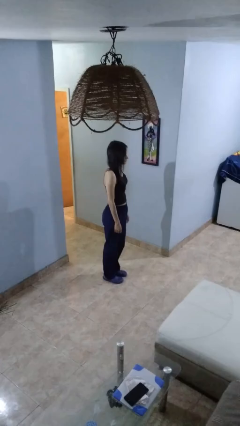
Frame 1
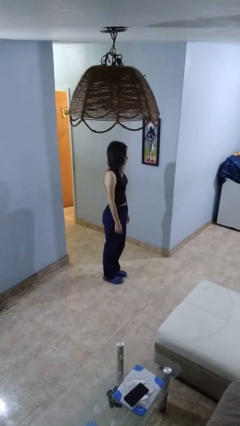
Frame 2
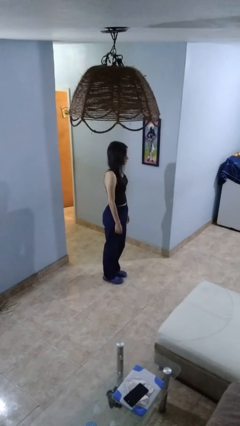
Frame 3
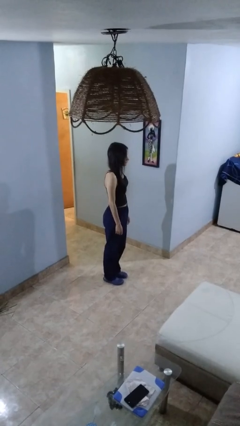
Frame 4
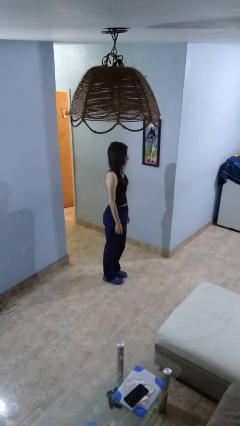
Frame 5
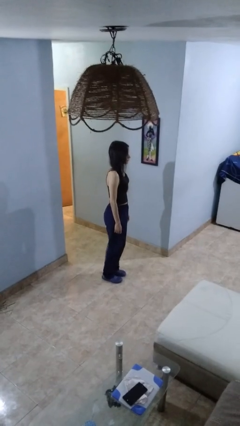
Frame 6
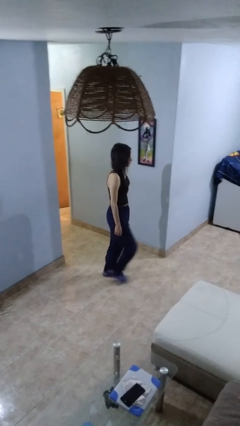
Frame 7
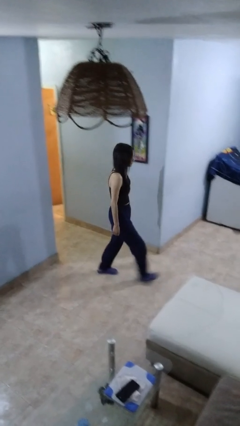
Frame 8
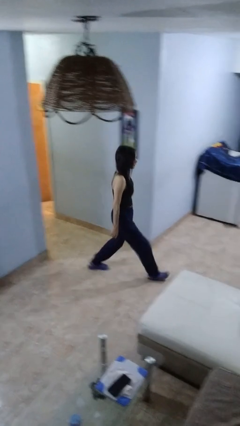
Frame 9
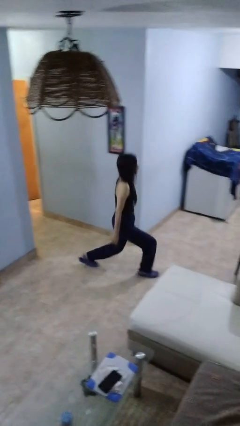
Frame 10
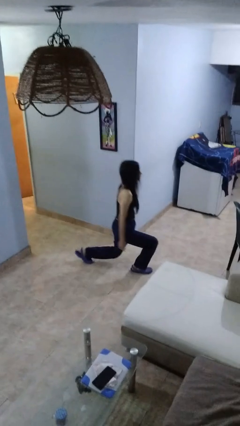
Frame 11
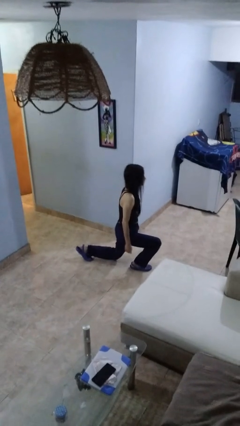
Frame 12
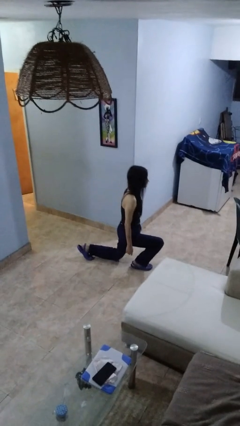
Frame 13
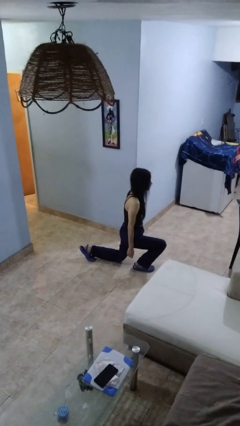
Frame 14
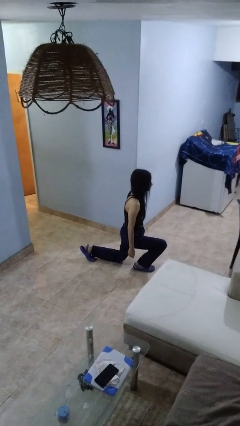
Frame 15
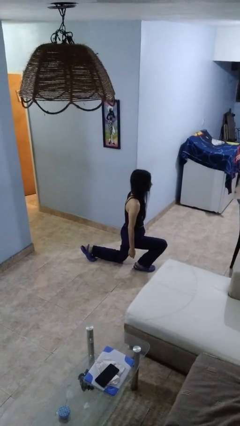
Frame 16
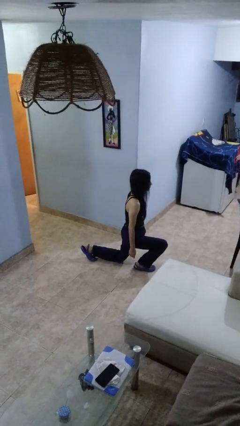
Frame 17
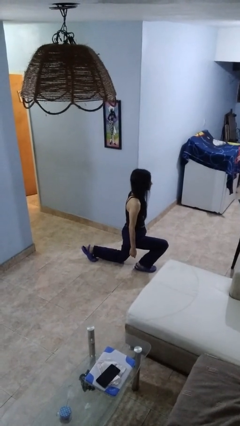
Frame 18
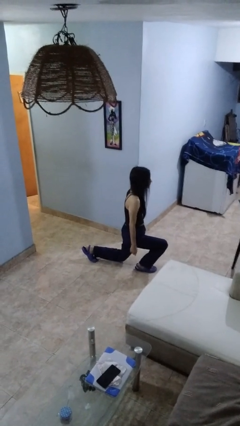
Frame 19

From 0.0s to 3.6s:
person exercises with lunges

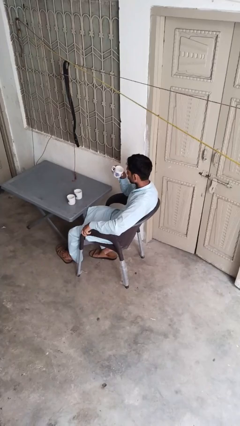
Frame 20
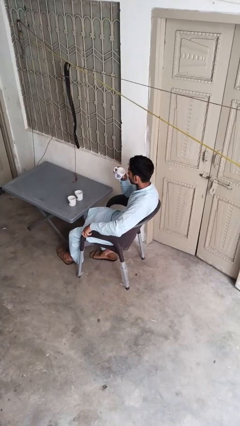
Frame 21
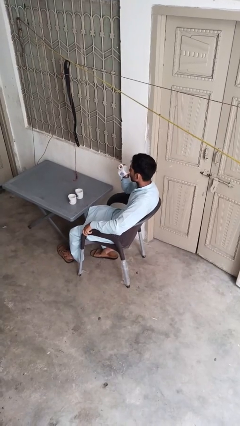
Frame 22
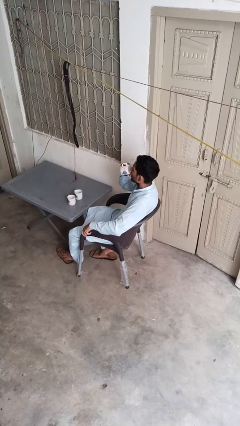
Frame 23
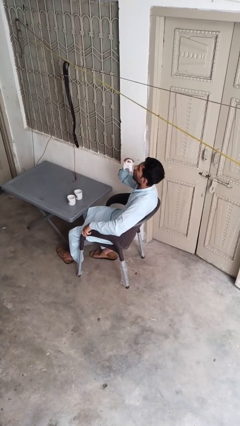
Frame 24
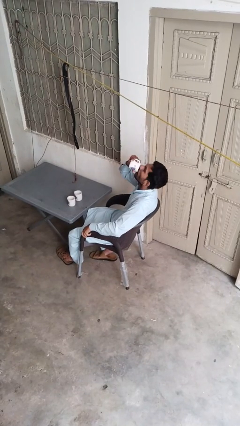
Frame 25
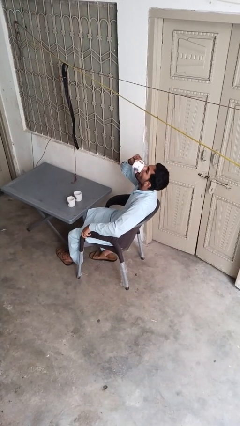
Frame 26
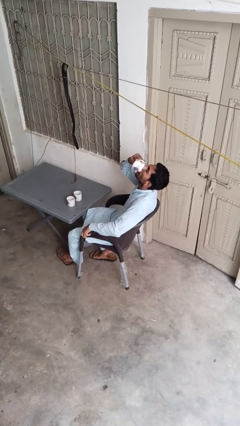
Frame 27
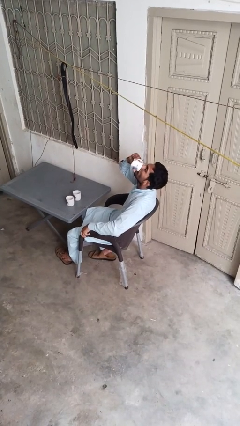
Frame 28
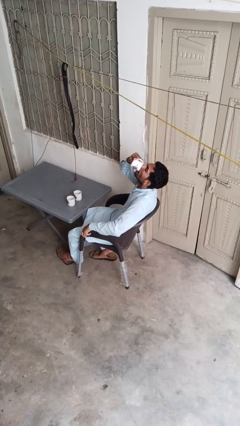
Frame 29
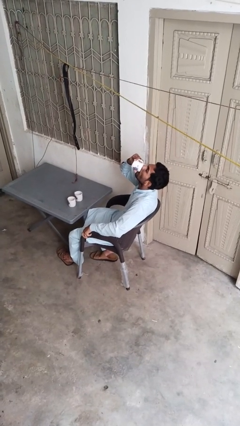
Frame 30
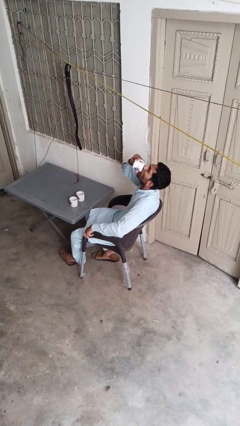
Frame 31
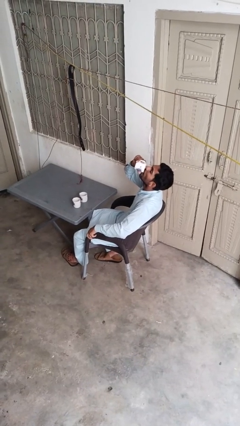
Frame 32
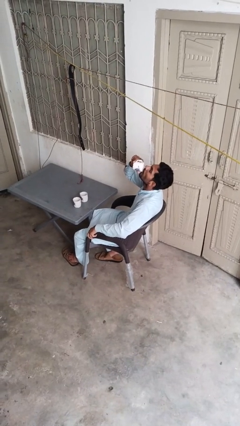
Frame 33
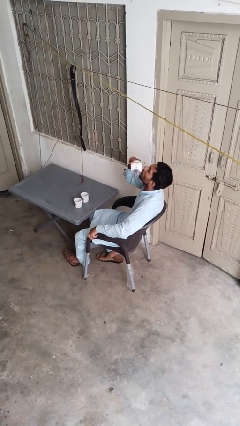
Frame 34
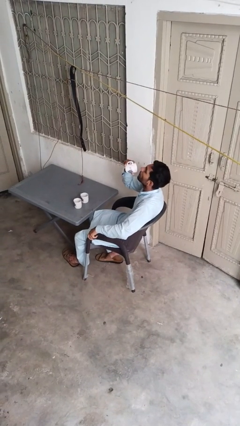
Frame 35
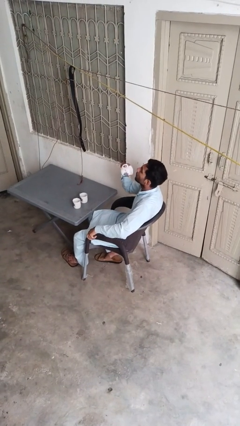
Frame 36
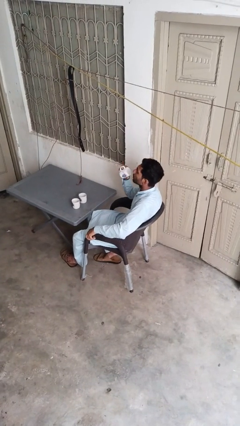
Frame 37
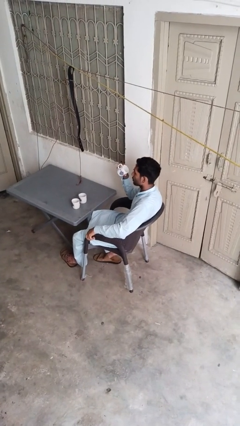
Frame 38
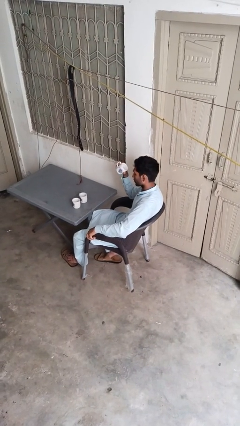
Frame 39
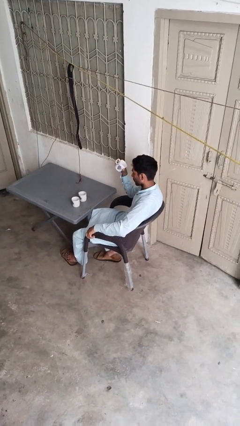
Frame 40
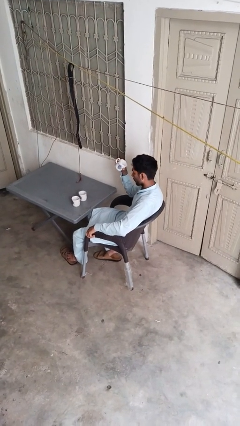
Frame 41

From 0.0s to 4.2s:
person drinks from shotglass

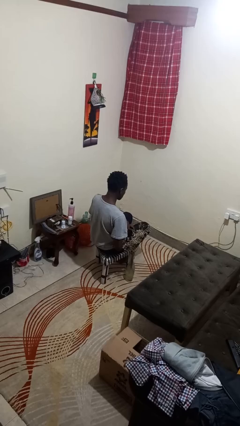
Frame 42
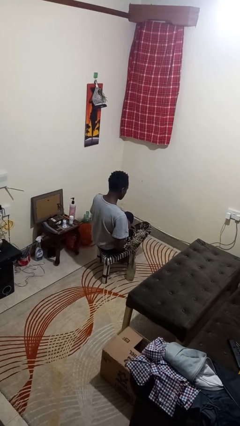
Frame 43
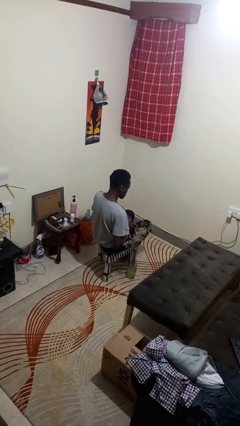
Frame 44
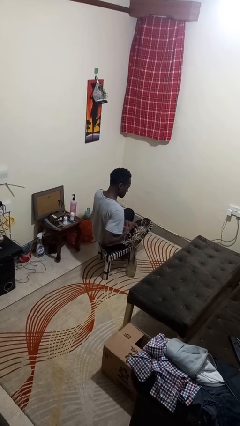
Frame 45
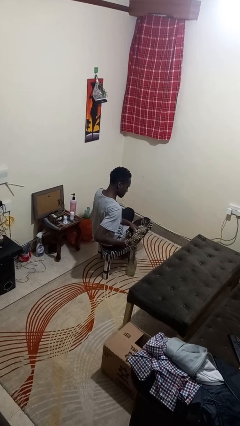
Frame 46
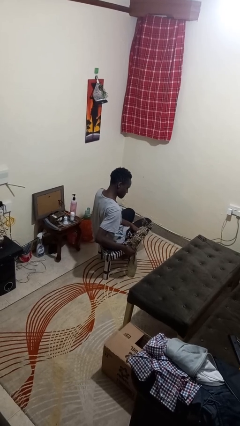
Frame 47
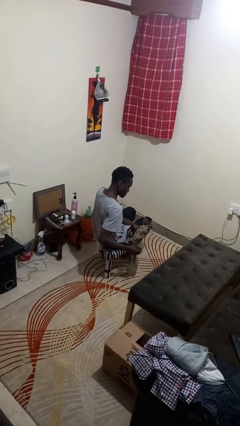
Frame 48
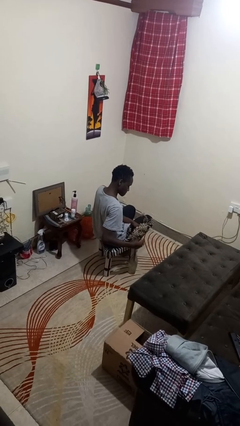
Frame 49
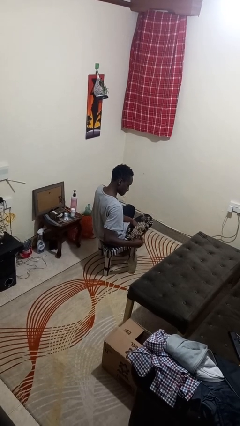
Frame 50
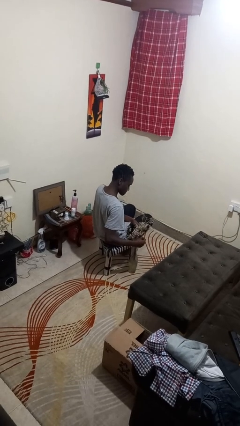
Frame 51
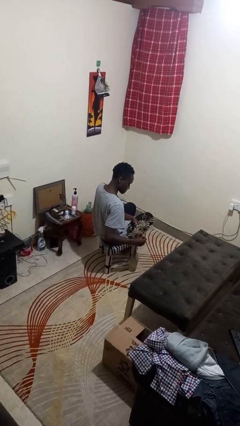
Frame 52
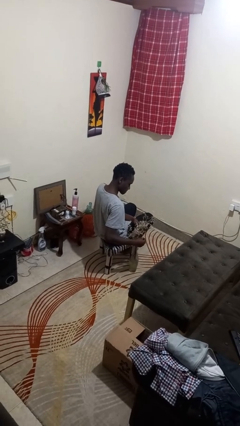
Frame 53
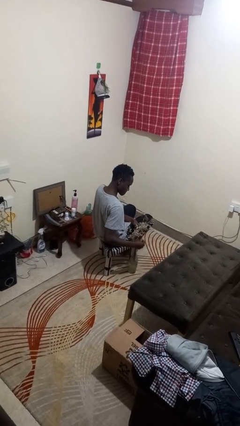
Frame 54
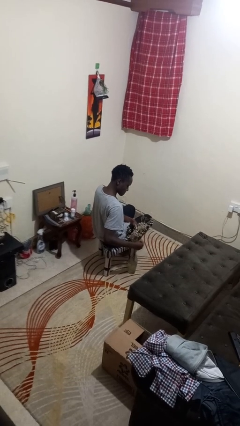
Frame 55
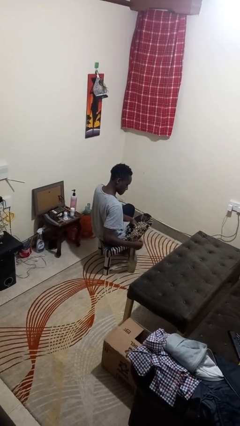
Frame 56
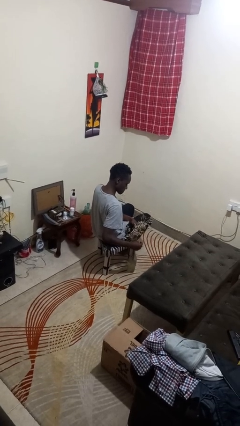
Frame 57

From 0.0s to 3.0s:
person arranges flowers in vase

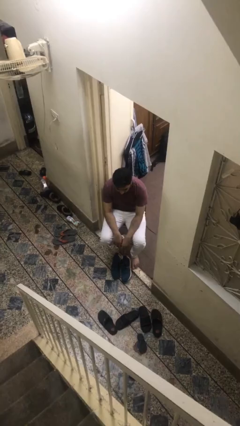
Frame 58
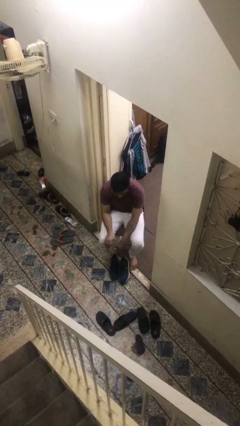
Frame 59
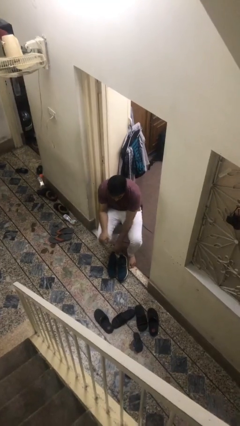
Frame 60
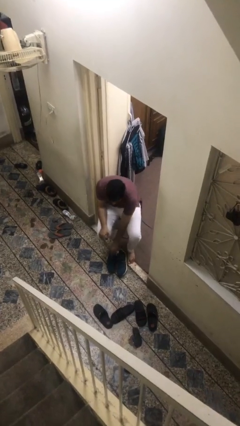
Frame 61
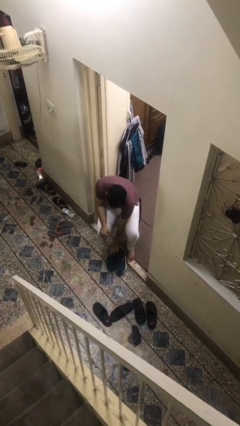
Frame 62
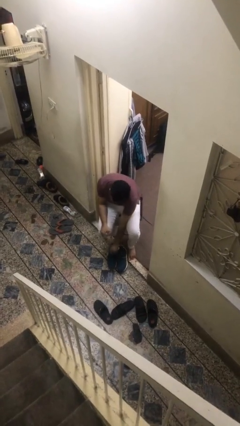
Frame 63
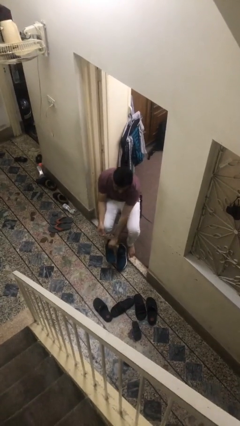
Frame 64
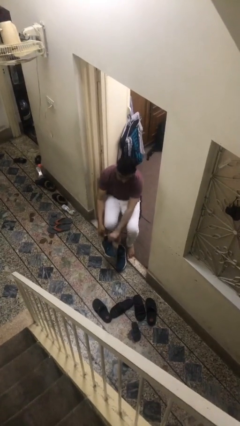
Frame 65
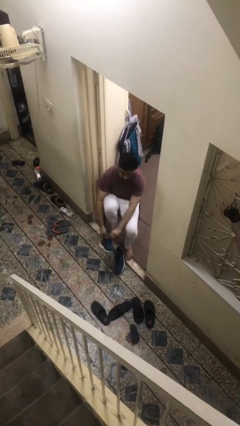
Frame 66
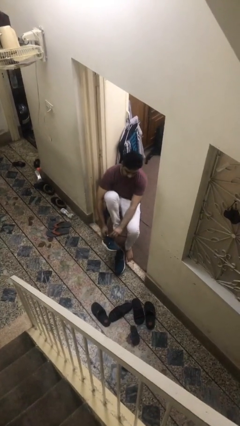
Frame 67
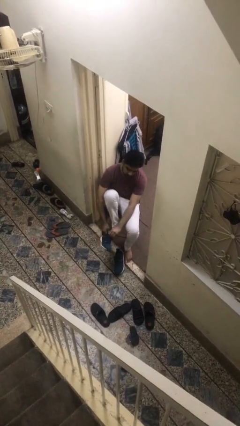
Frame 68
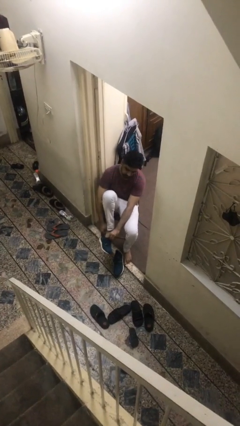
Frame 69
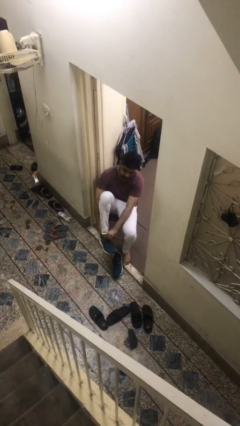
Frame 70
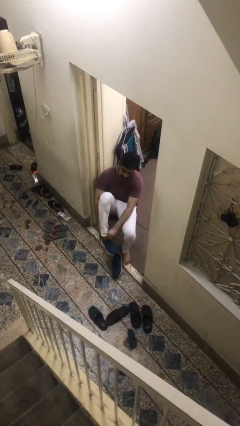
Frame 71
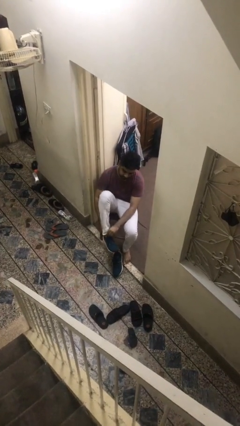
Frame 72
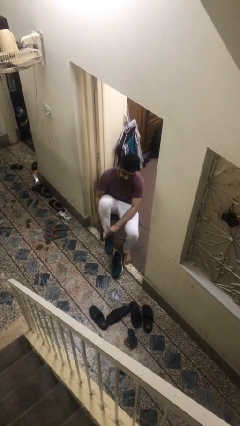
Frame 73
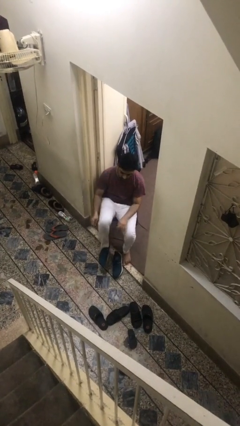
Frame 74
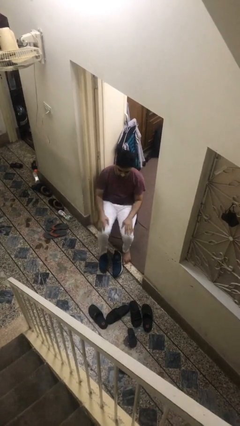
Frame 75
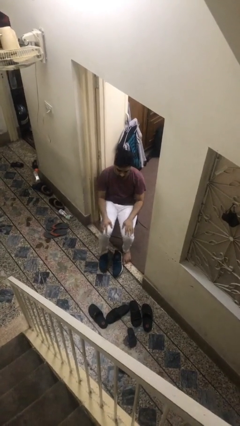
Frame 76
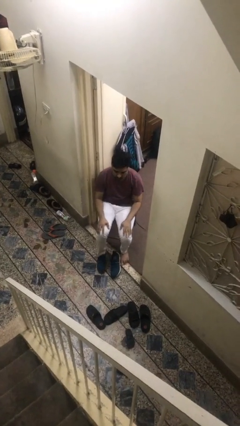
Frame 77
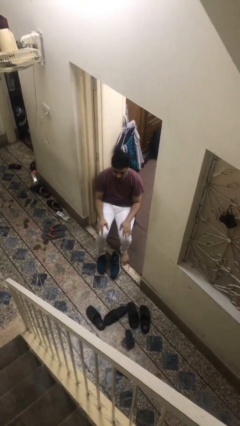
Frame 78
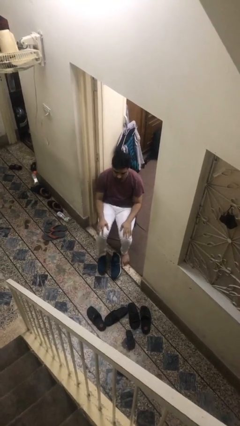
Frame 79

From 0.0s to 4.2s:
person puts on shoes

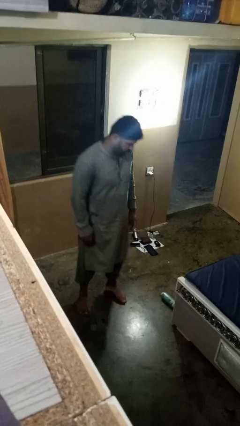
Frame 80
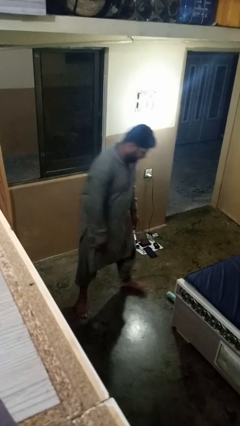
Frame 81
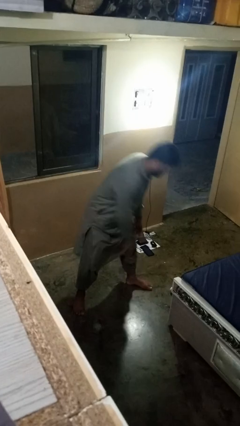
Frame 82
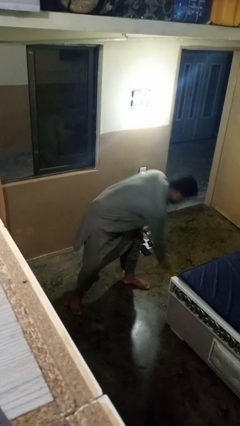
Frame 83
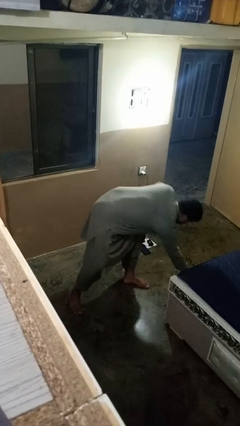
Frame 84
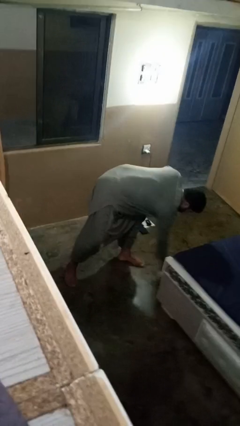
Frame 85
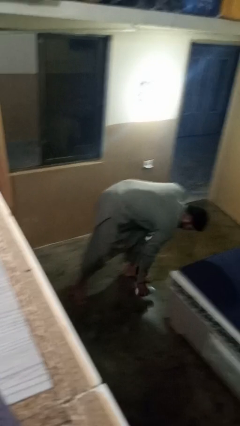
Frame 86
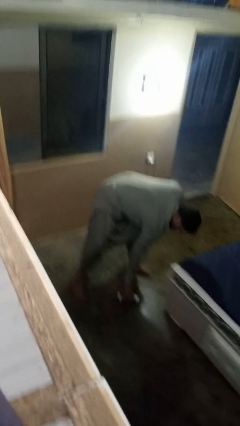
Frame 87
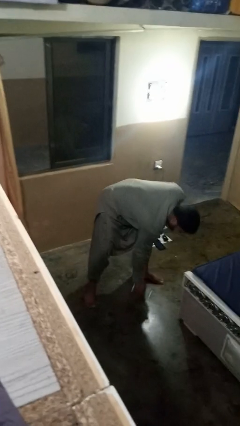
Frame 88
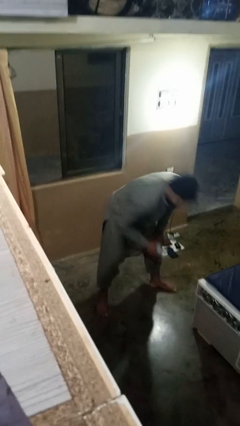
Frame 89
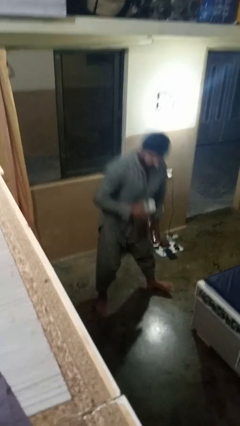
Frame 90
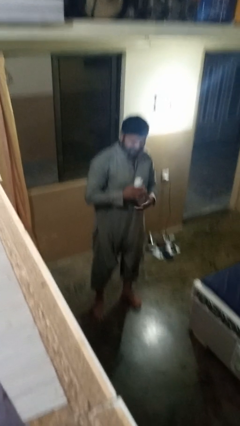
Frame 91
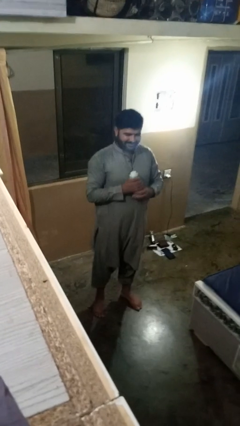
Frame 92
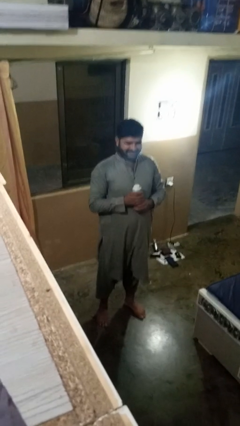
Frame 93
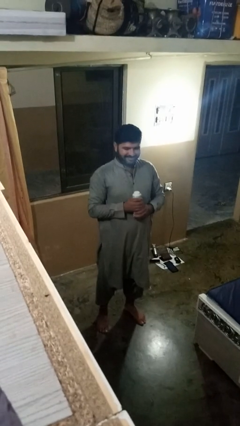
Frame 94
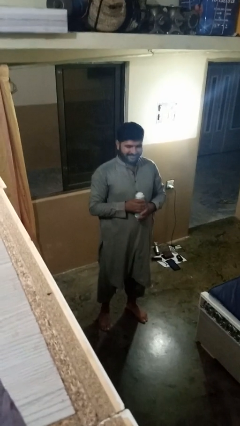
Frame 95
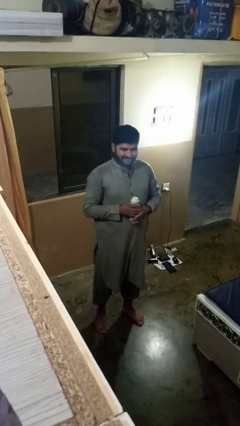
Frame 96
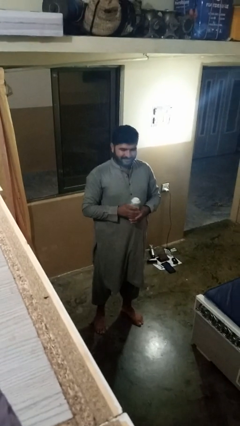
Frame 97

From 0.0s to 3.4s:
person picks up object from floor
